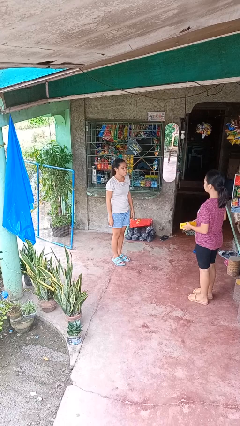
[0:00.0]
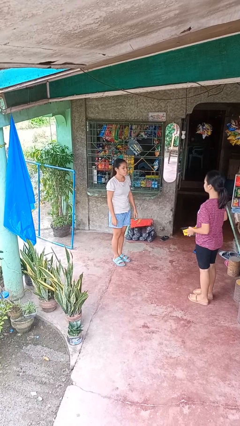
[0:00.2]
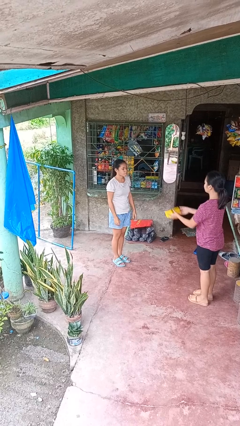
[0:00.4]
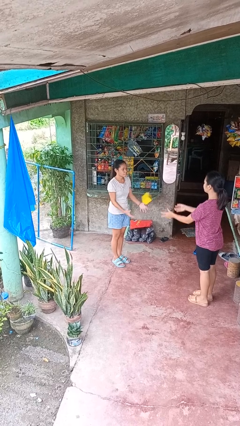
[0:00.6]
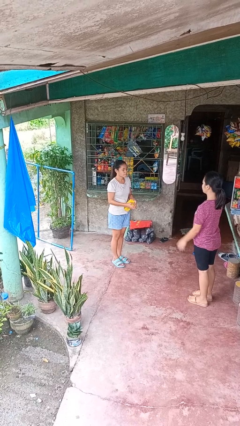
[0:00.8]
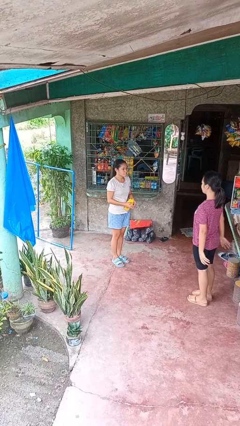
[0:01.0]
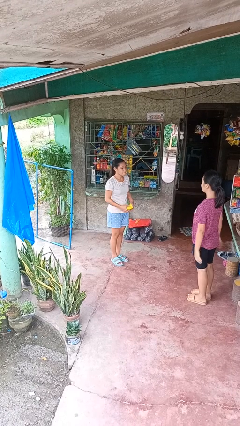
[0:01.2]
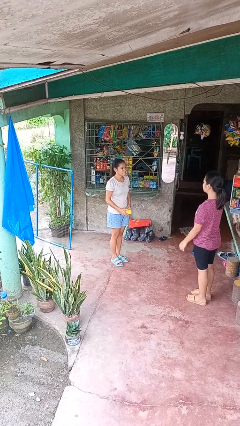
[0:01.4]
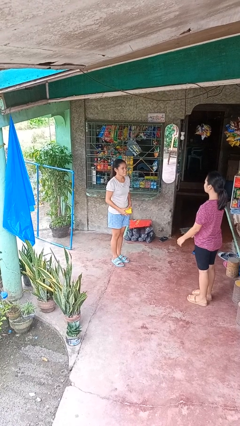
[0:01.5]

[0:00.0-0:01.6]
person catches object from person

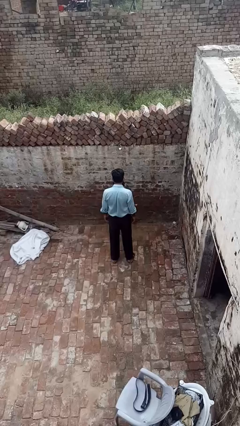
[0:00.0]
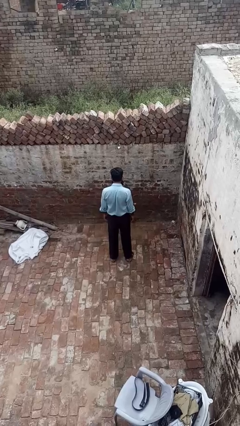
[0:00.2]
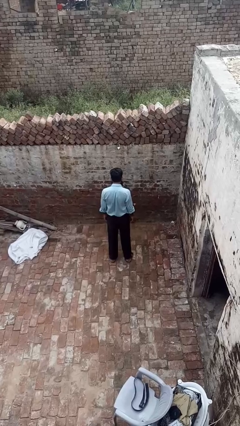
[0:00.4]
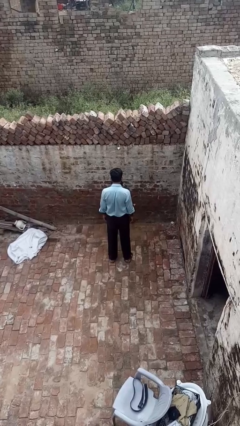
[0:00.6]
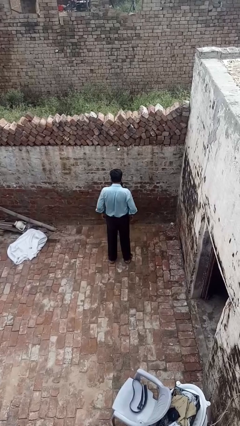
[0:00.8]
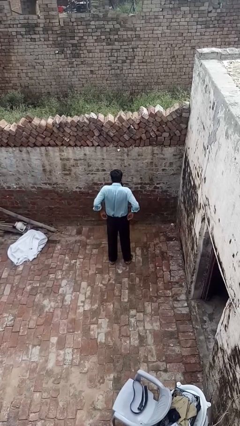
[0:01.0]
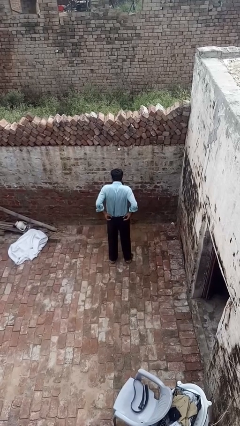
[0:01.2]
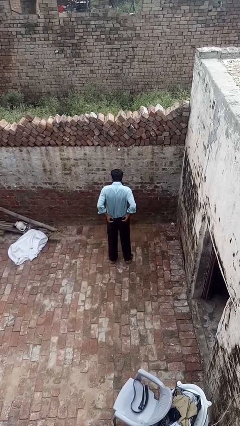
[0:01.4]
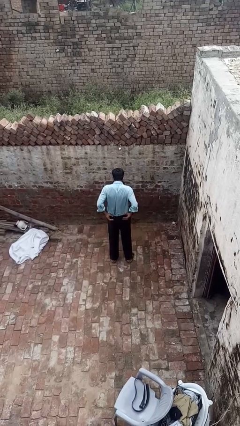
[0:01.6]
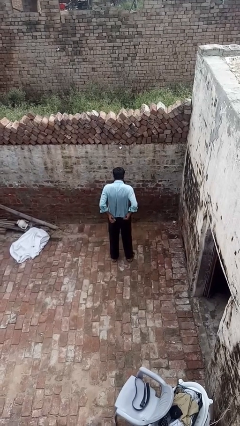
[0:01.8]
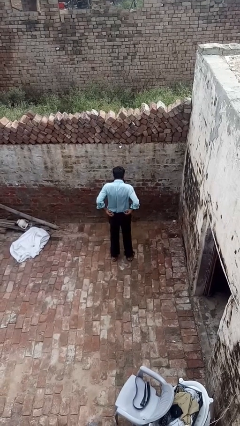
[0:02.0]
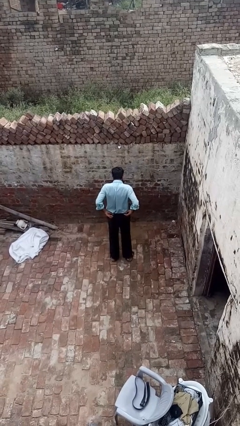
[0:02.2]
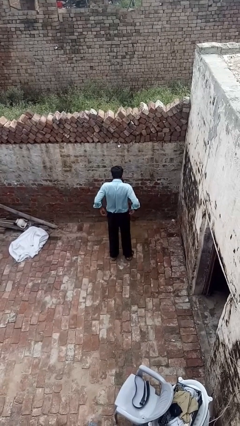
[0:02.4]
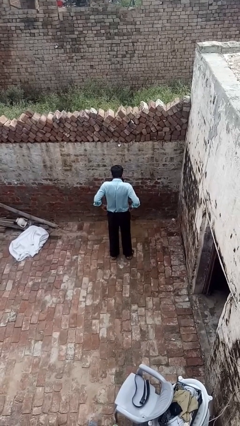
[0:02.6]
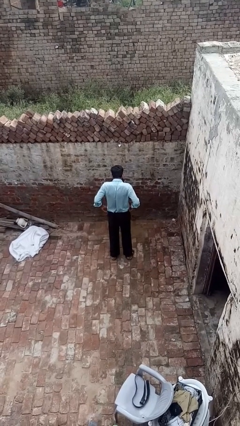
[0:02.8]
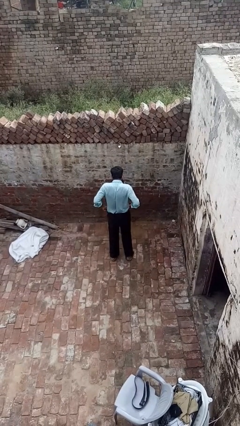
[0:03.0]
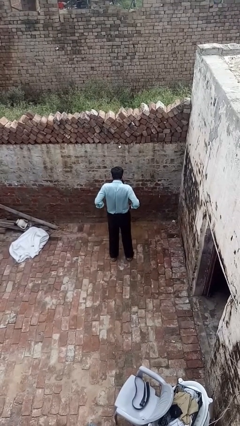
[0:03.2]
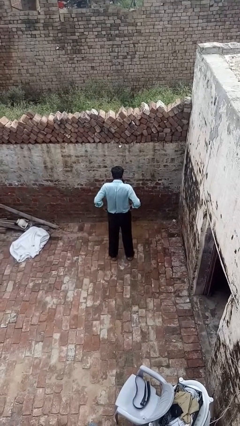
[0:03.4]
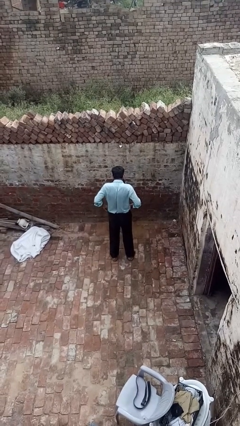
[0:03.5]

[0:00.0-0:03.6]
person hikes up pants

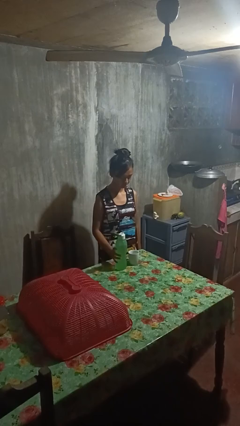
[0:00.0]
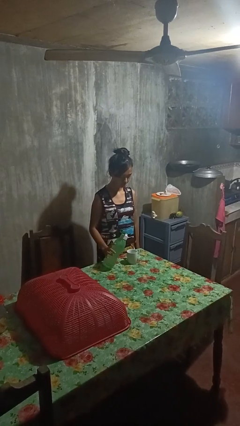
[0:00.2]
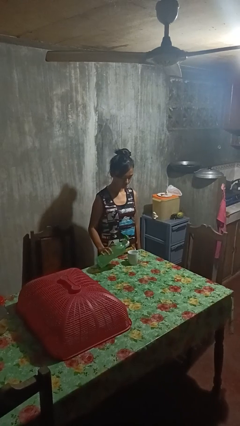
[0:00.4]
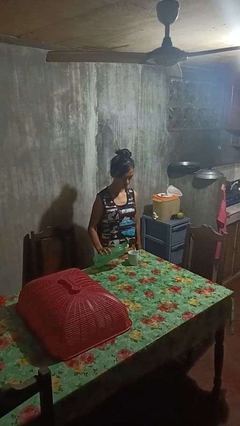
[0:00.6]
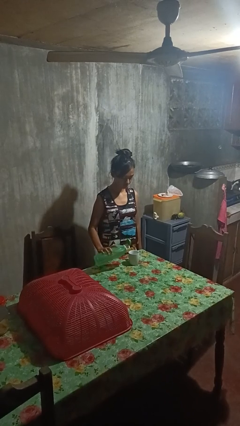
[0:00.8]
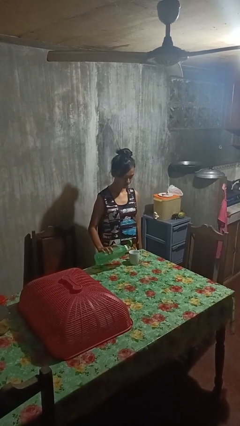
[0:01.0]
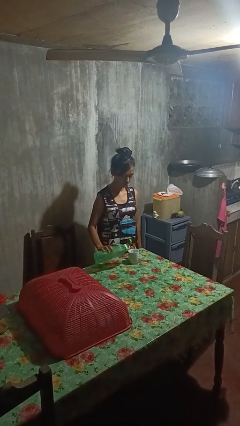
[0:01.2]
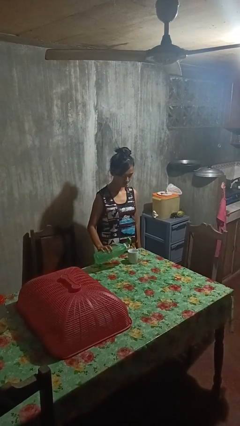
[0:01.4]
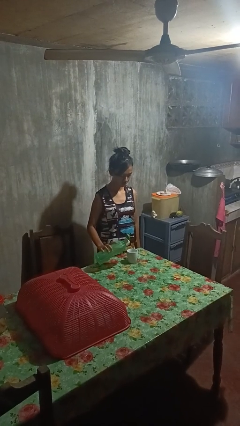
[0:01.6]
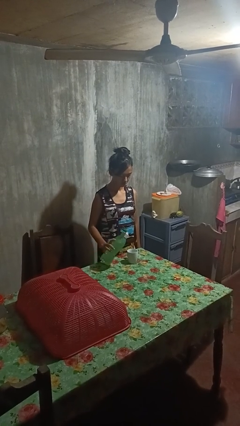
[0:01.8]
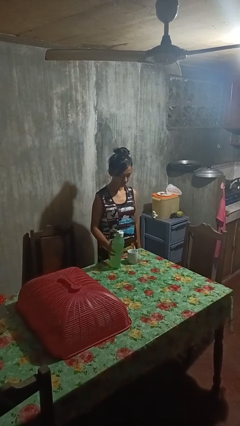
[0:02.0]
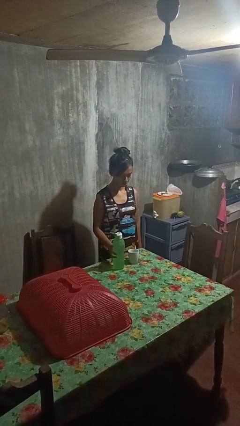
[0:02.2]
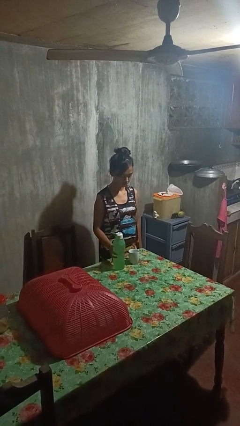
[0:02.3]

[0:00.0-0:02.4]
person pours liquid into cup

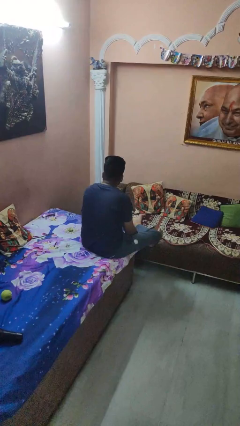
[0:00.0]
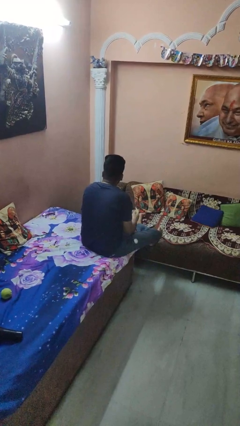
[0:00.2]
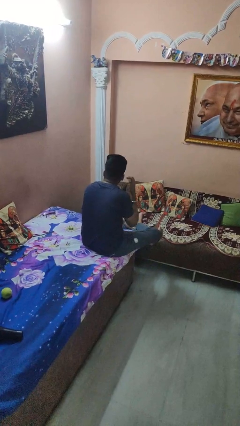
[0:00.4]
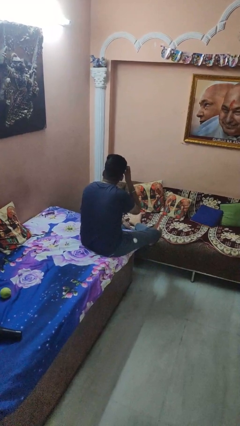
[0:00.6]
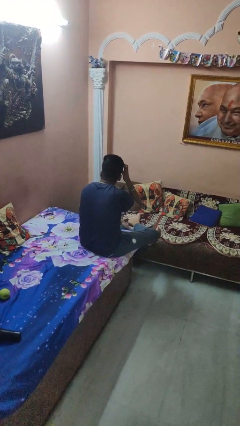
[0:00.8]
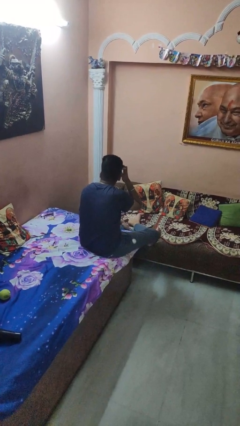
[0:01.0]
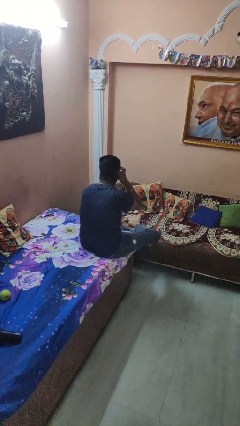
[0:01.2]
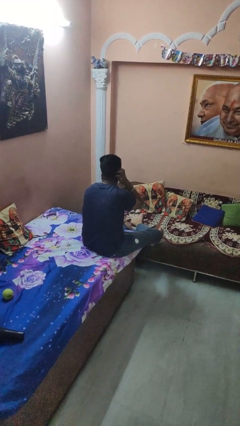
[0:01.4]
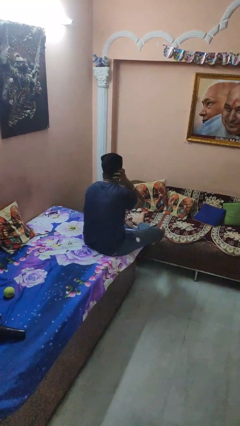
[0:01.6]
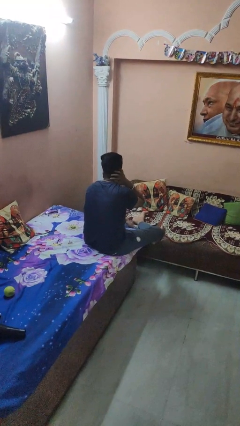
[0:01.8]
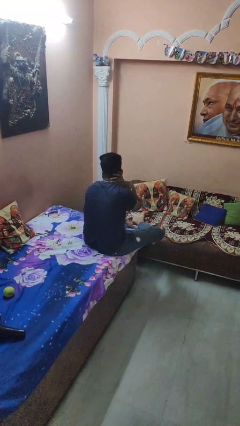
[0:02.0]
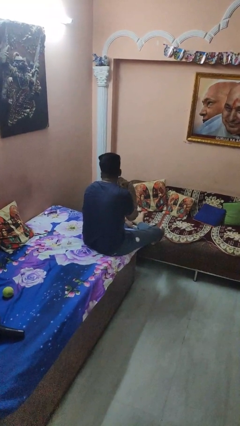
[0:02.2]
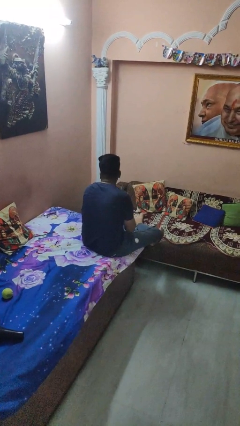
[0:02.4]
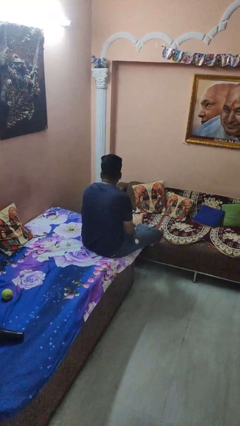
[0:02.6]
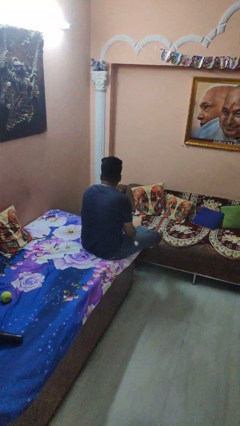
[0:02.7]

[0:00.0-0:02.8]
person strokes hair

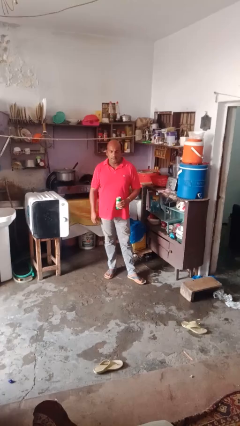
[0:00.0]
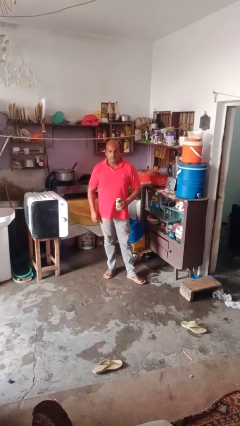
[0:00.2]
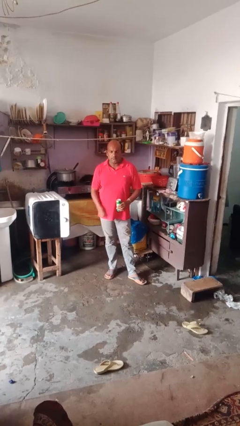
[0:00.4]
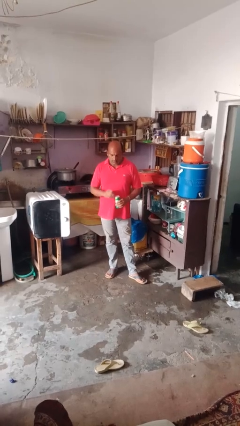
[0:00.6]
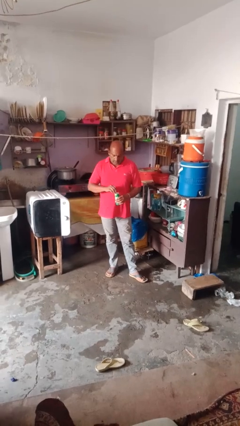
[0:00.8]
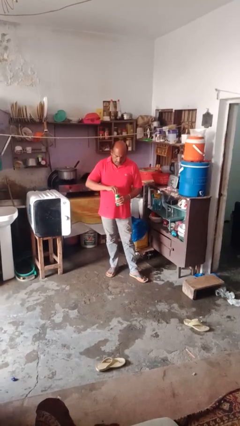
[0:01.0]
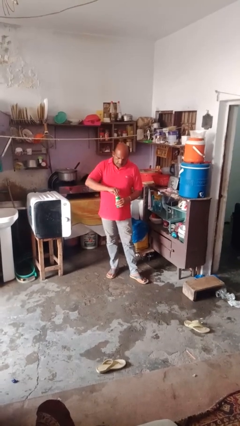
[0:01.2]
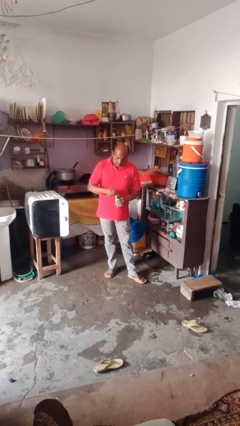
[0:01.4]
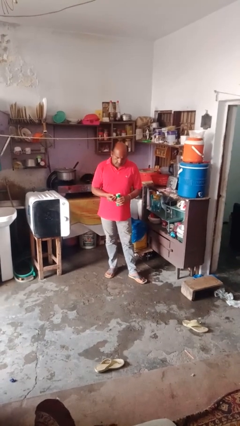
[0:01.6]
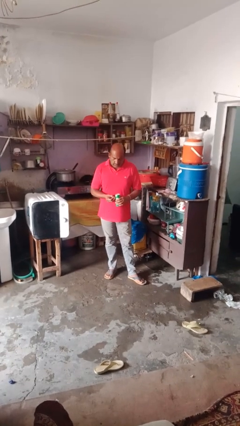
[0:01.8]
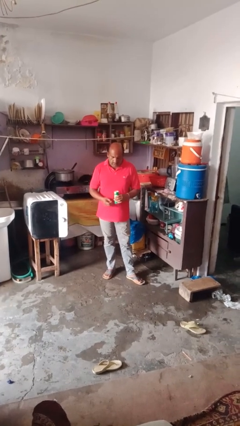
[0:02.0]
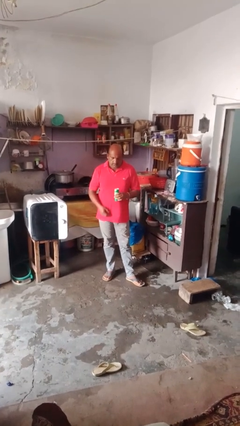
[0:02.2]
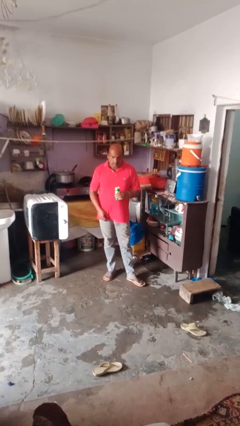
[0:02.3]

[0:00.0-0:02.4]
person opens beverage can

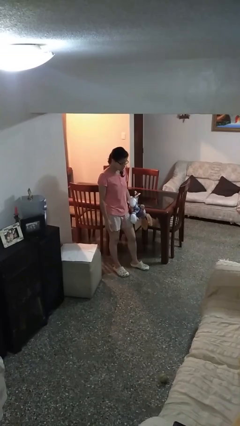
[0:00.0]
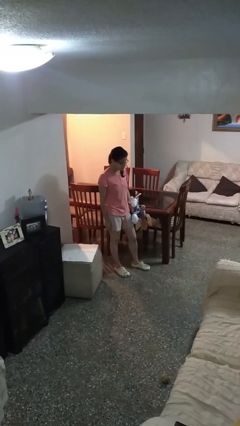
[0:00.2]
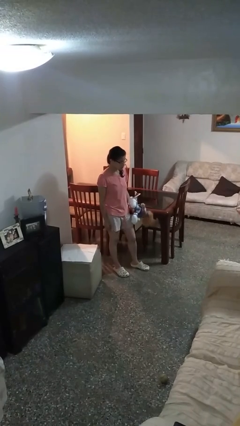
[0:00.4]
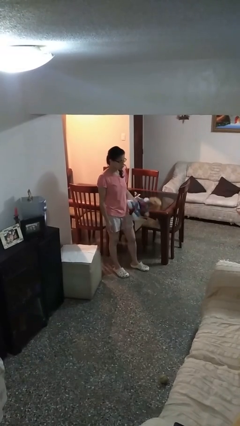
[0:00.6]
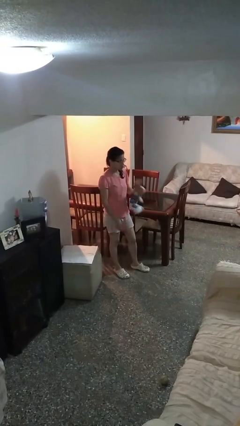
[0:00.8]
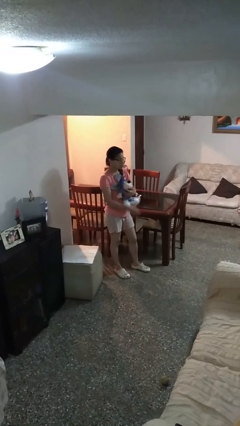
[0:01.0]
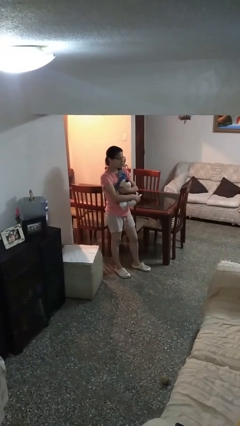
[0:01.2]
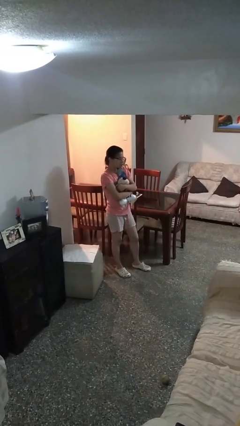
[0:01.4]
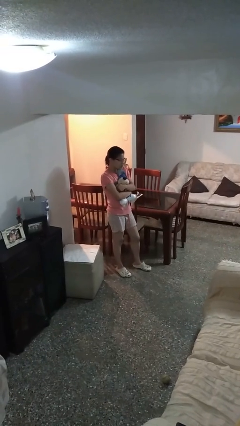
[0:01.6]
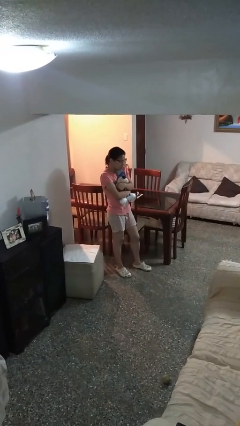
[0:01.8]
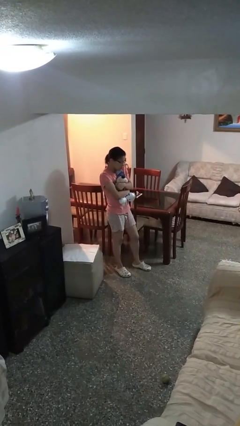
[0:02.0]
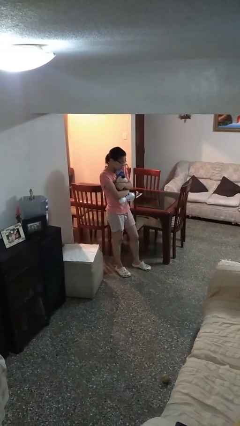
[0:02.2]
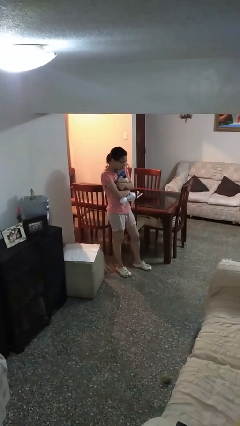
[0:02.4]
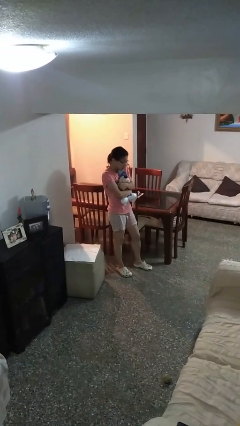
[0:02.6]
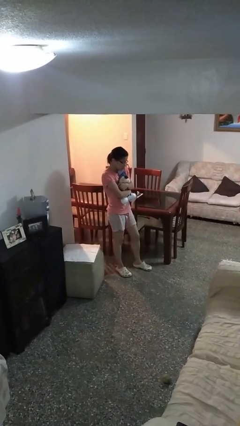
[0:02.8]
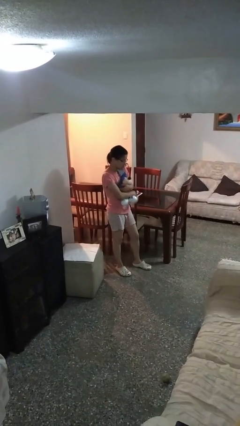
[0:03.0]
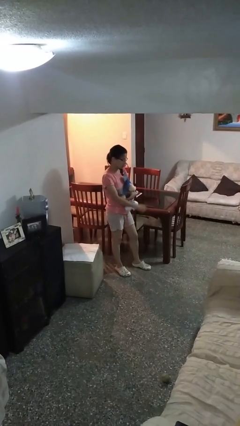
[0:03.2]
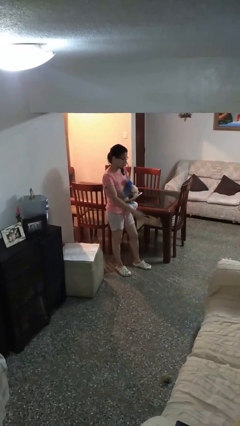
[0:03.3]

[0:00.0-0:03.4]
person hugs stuffed animal

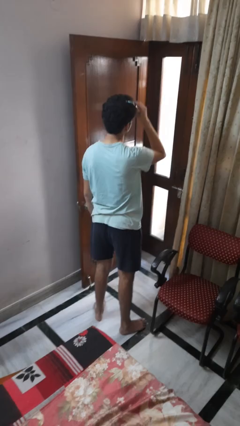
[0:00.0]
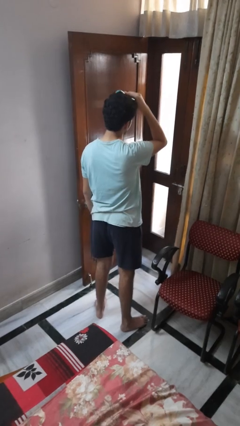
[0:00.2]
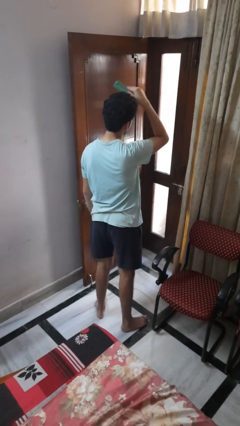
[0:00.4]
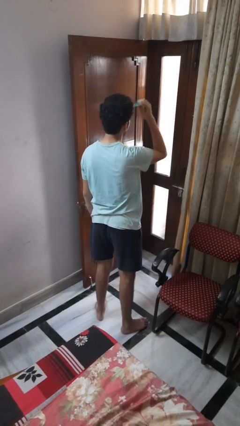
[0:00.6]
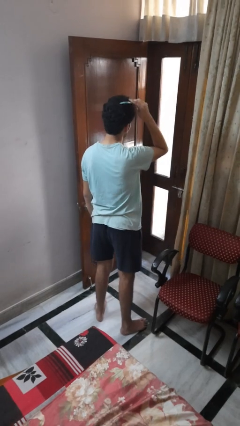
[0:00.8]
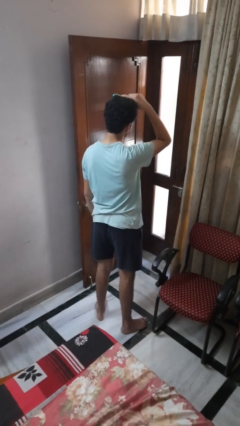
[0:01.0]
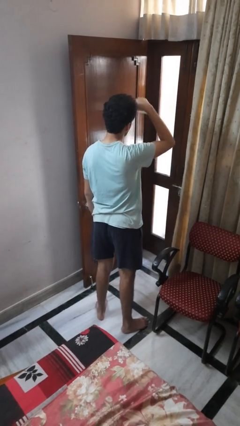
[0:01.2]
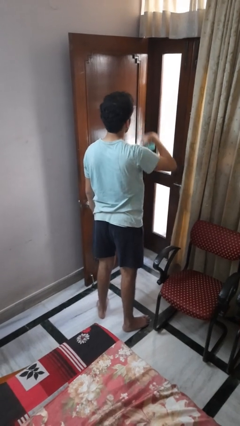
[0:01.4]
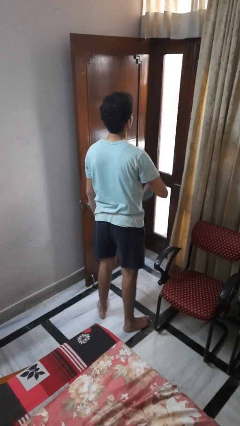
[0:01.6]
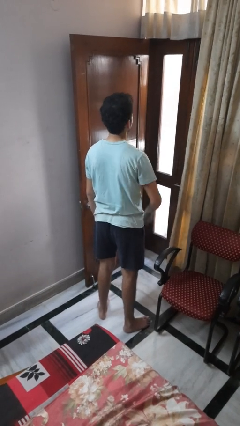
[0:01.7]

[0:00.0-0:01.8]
person brushes hair
